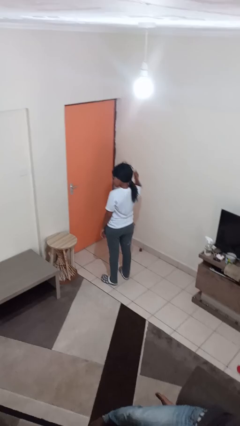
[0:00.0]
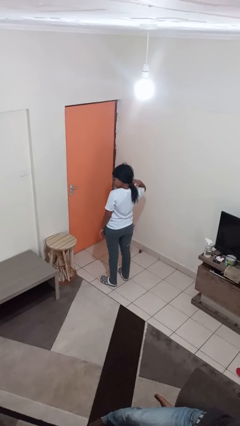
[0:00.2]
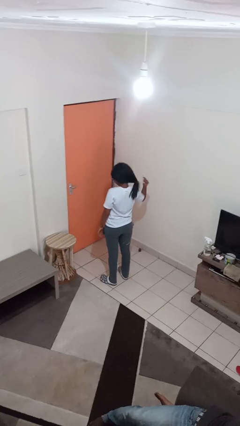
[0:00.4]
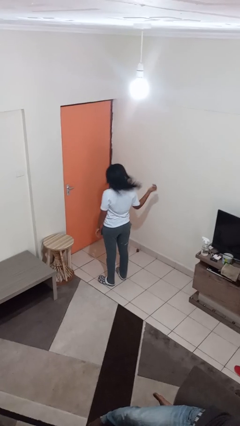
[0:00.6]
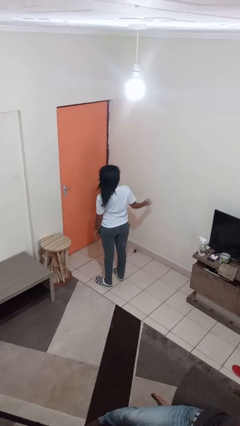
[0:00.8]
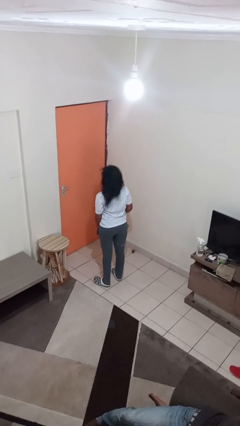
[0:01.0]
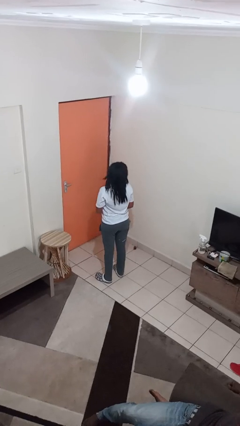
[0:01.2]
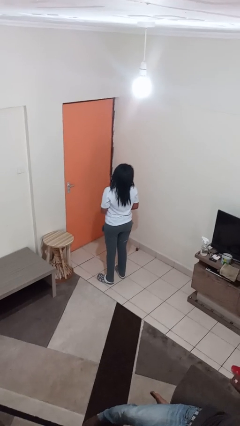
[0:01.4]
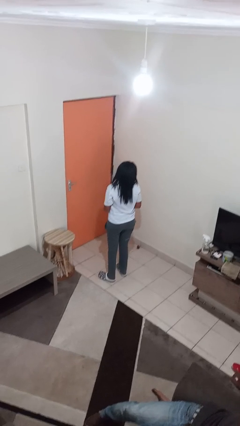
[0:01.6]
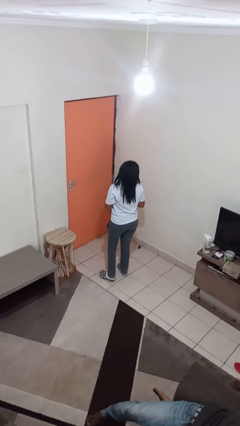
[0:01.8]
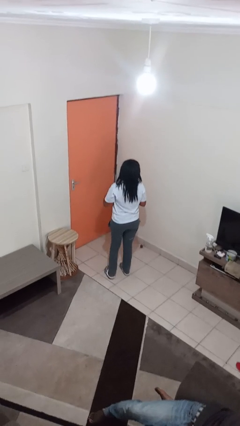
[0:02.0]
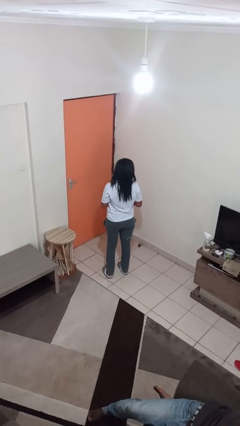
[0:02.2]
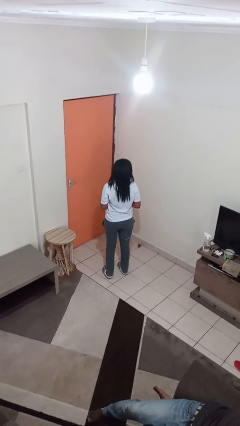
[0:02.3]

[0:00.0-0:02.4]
person takes off hairtie

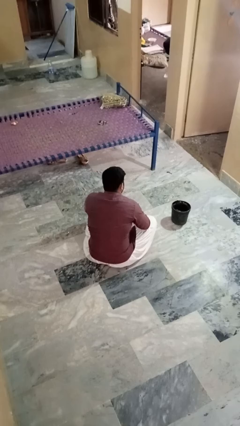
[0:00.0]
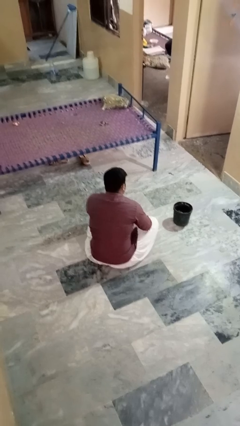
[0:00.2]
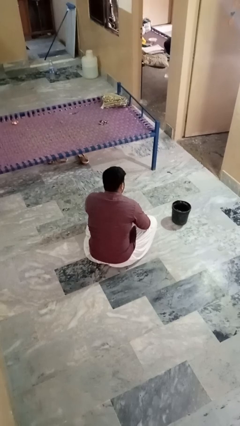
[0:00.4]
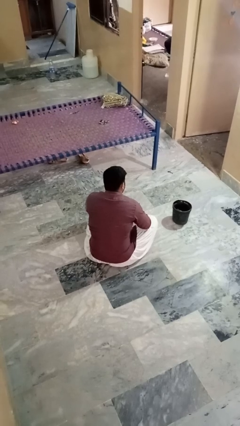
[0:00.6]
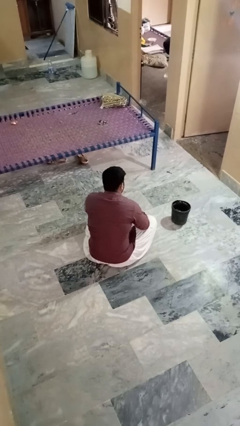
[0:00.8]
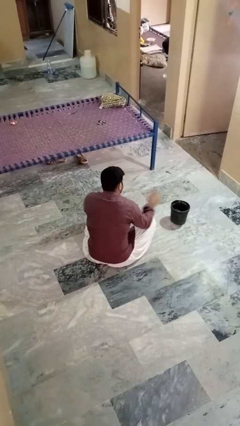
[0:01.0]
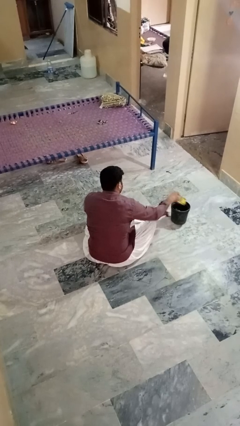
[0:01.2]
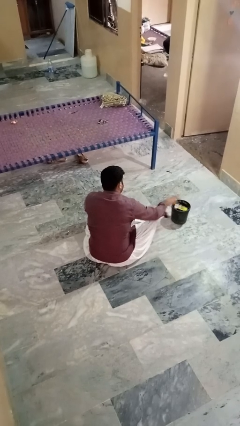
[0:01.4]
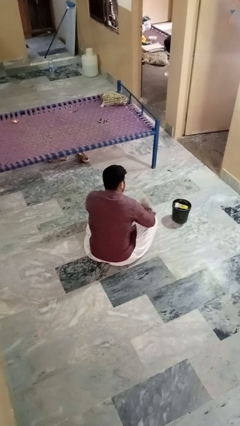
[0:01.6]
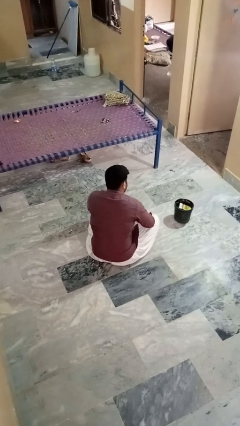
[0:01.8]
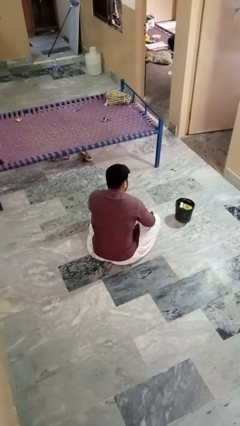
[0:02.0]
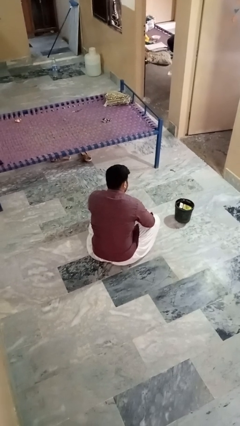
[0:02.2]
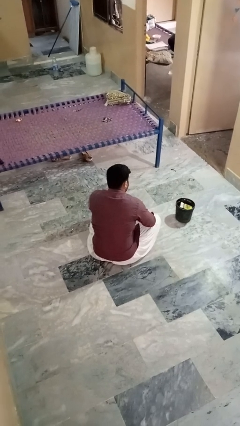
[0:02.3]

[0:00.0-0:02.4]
person puts object into basket

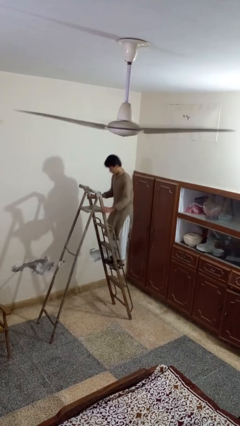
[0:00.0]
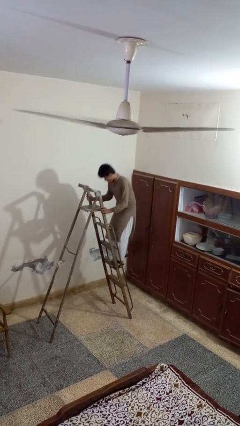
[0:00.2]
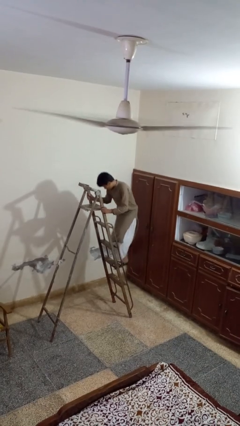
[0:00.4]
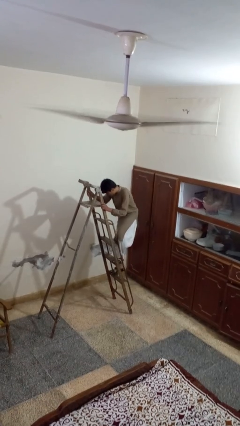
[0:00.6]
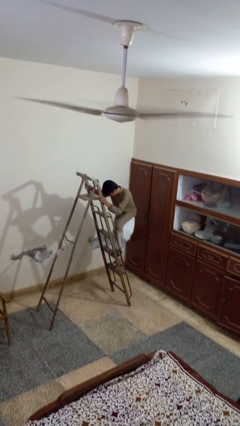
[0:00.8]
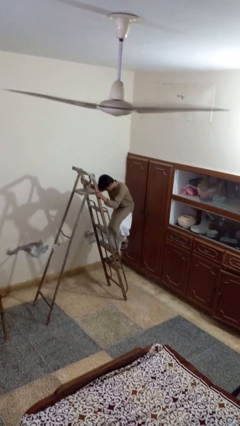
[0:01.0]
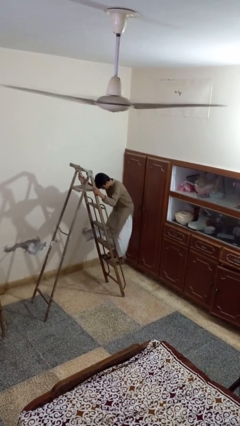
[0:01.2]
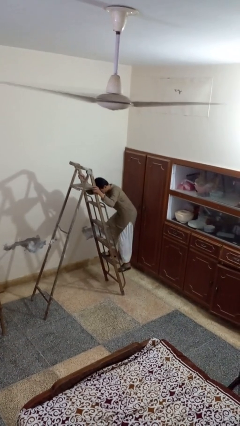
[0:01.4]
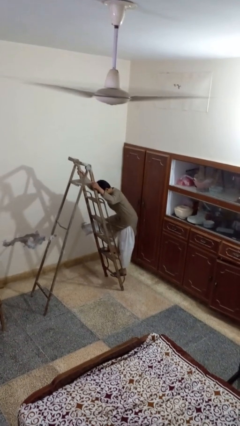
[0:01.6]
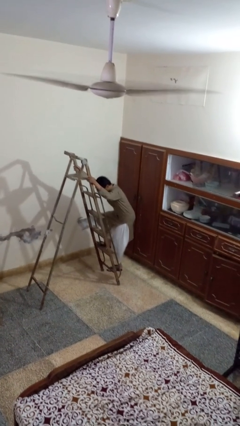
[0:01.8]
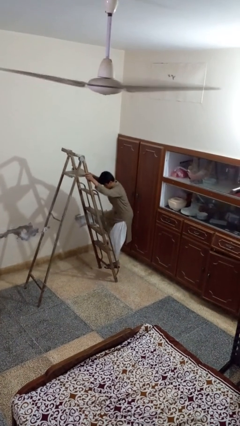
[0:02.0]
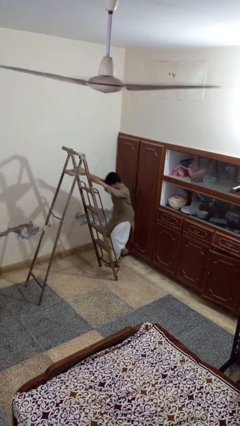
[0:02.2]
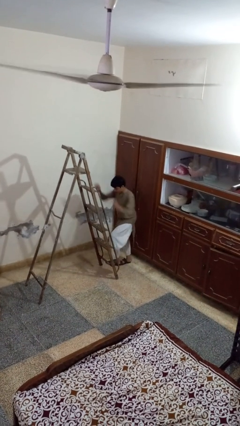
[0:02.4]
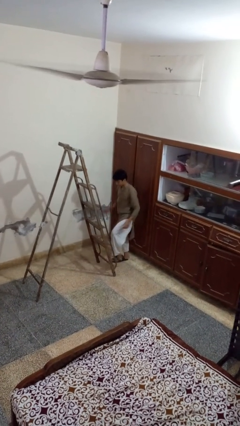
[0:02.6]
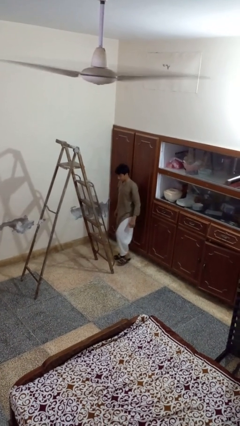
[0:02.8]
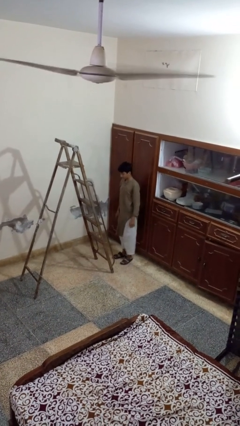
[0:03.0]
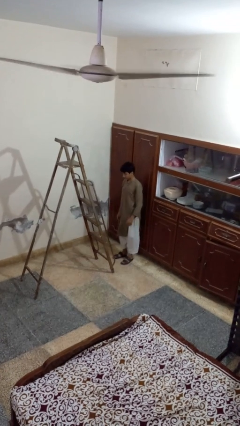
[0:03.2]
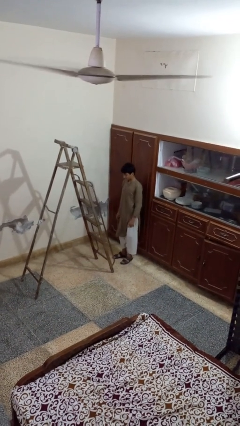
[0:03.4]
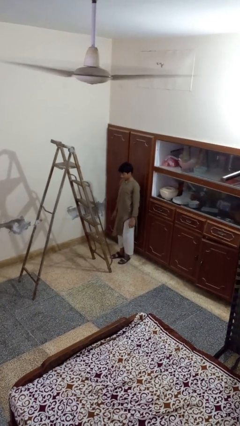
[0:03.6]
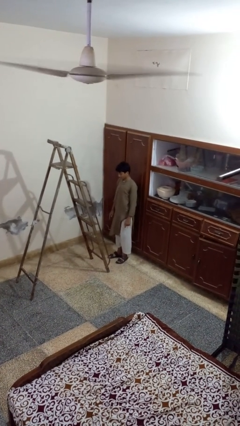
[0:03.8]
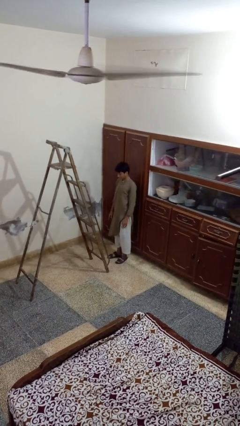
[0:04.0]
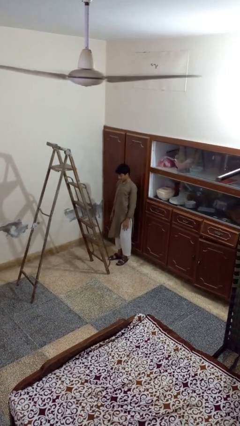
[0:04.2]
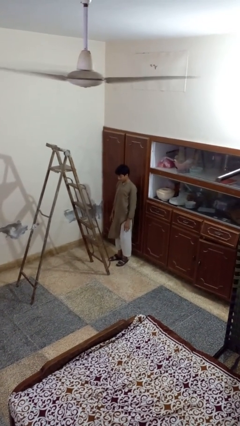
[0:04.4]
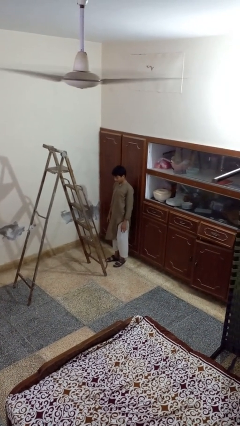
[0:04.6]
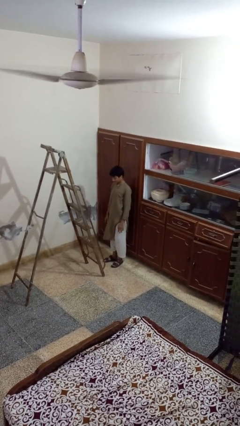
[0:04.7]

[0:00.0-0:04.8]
person climbs down ladder

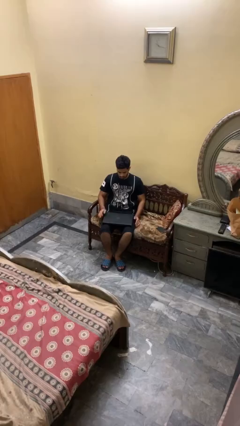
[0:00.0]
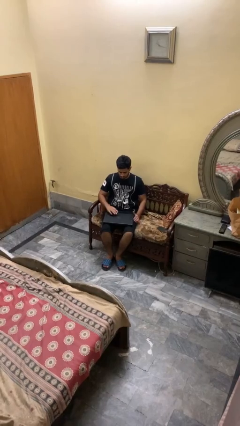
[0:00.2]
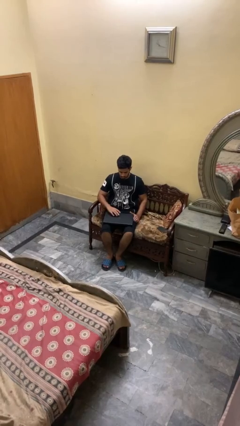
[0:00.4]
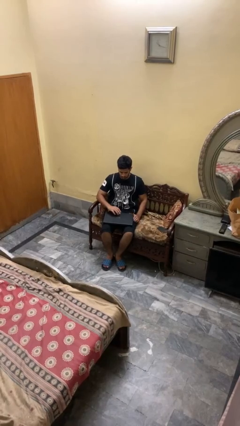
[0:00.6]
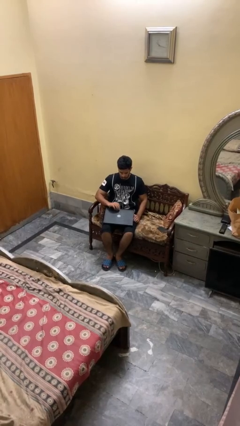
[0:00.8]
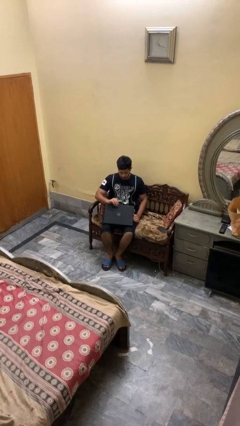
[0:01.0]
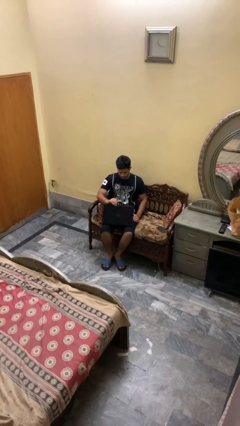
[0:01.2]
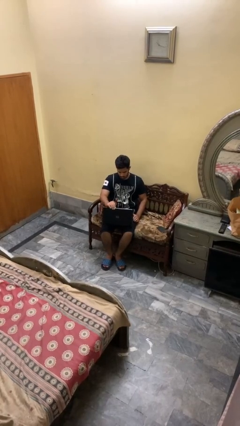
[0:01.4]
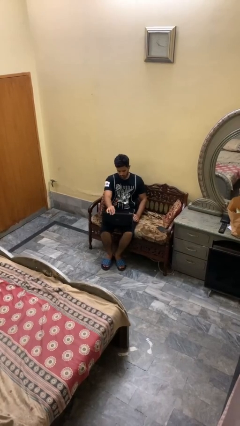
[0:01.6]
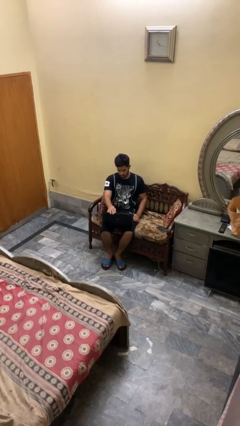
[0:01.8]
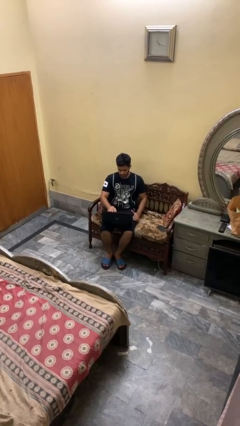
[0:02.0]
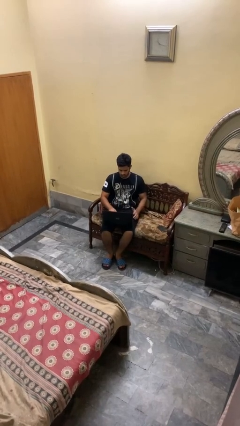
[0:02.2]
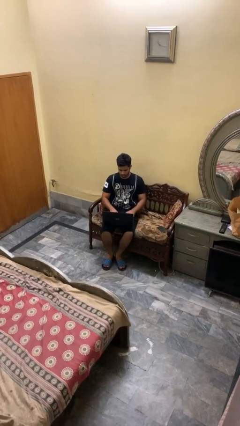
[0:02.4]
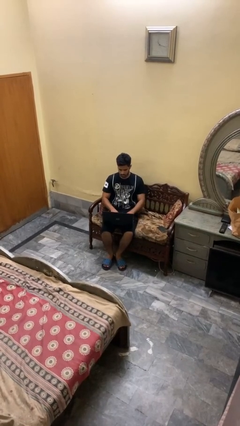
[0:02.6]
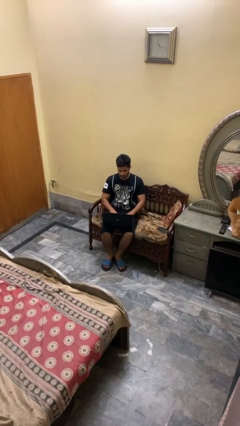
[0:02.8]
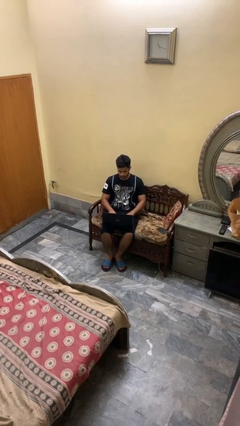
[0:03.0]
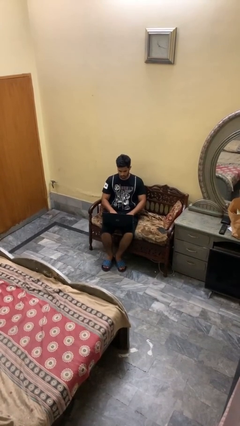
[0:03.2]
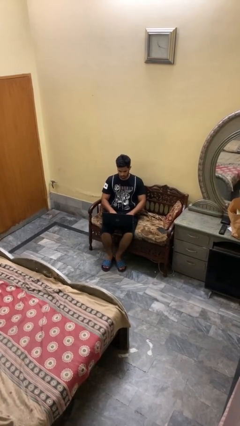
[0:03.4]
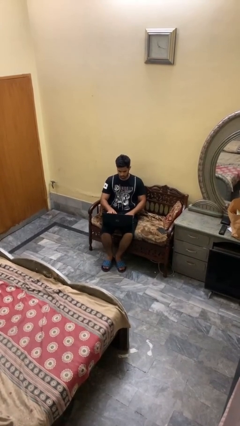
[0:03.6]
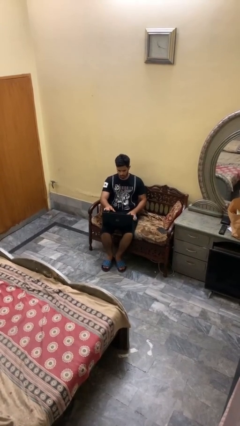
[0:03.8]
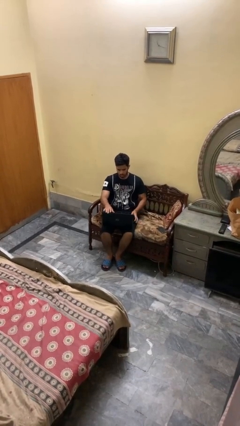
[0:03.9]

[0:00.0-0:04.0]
person opens laptop

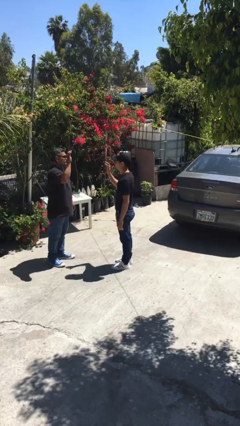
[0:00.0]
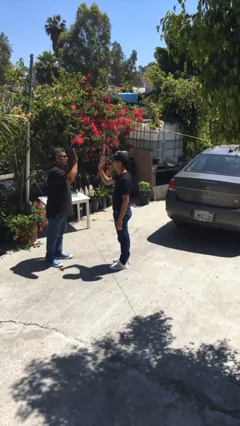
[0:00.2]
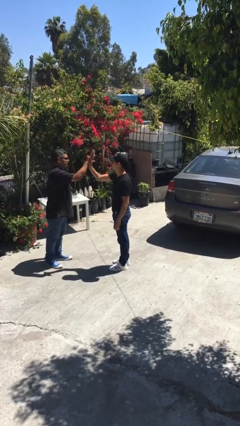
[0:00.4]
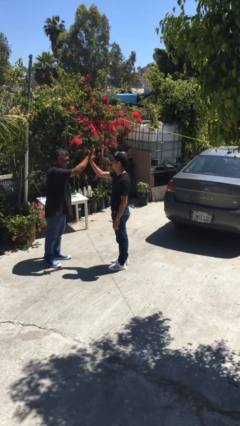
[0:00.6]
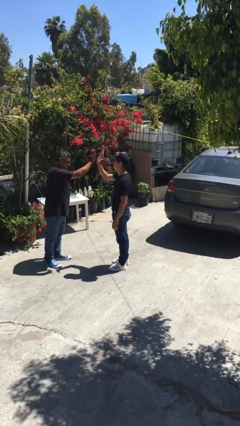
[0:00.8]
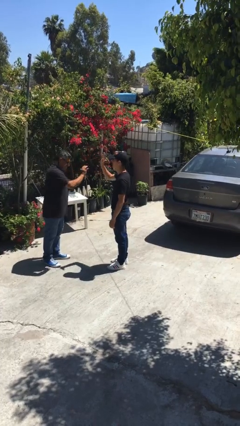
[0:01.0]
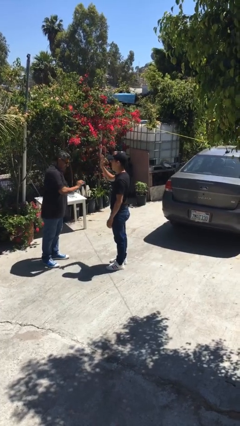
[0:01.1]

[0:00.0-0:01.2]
person highfives hand

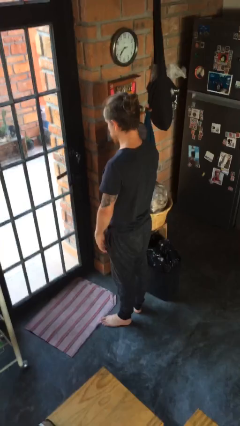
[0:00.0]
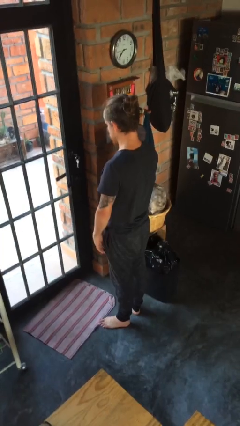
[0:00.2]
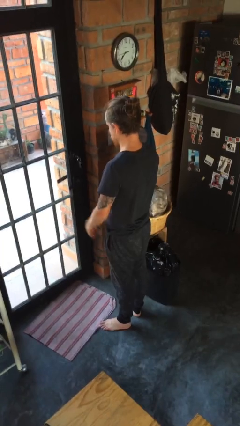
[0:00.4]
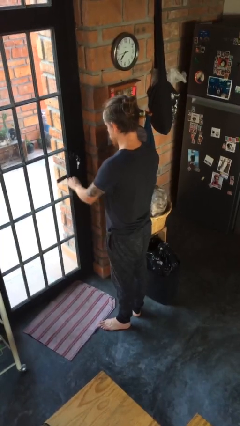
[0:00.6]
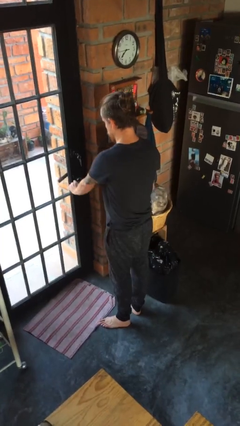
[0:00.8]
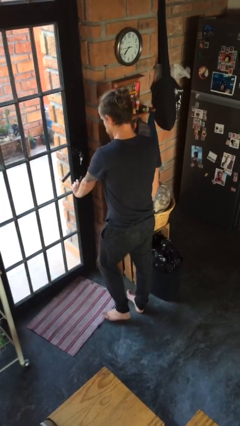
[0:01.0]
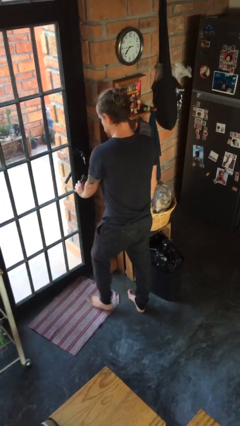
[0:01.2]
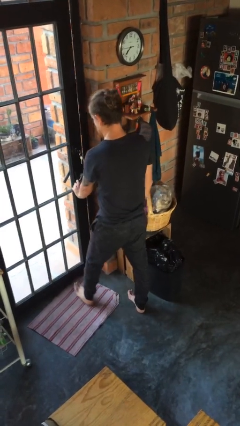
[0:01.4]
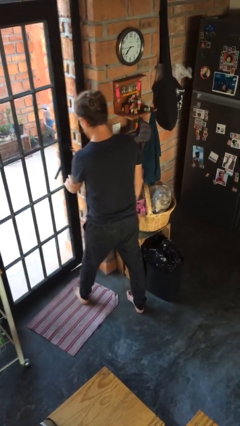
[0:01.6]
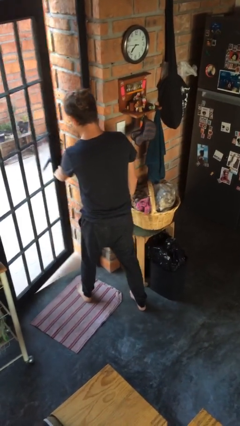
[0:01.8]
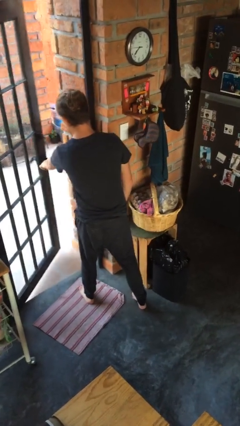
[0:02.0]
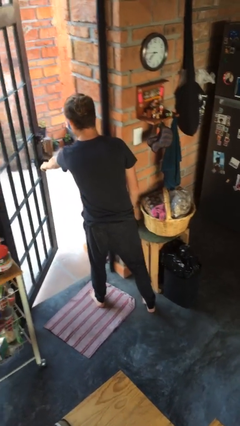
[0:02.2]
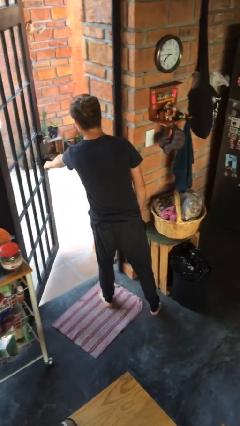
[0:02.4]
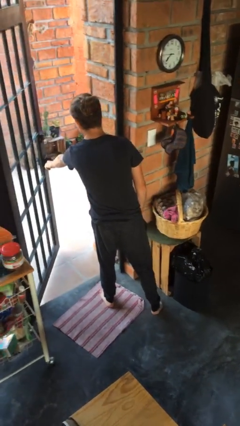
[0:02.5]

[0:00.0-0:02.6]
person opens facility door
